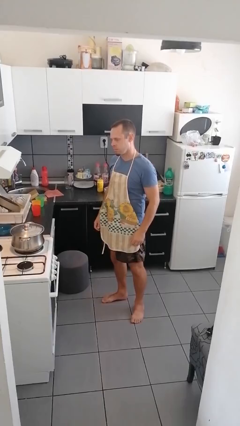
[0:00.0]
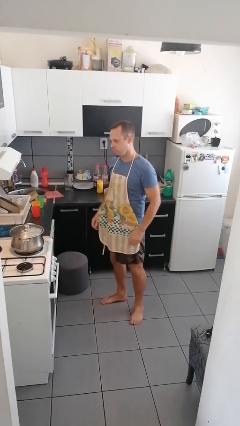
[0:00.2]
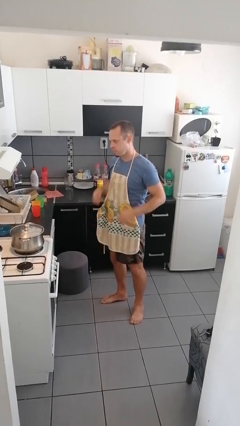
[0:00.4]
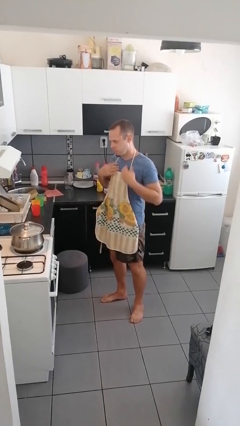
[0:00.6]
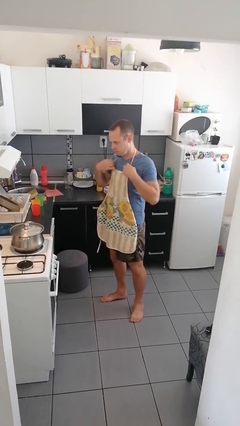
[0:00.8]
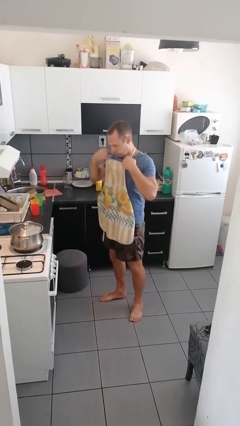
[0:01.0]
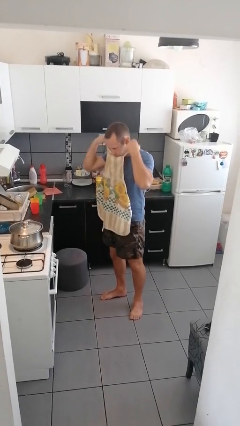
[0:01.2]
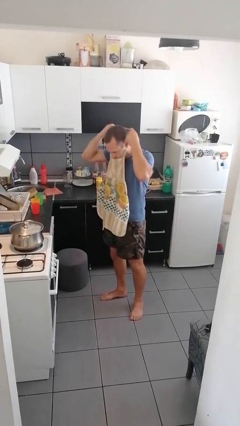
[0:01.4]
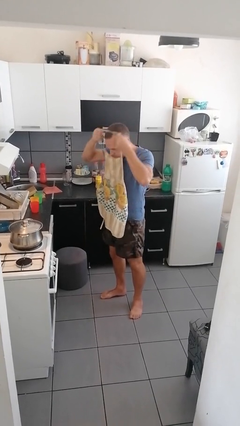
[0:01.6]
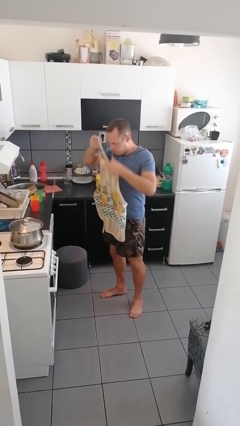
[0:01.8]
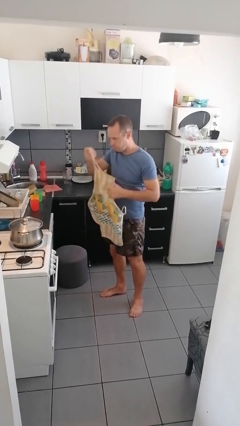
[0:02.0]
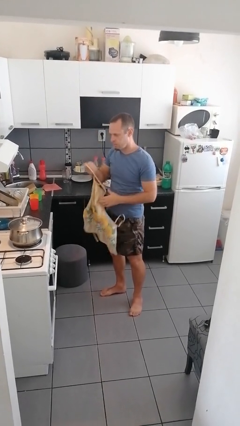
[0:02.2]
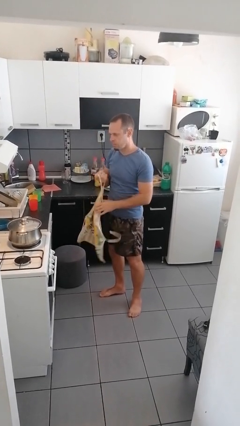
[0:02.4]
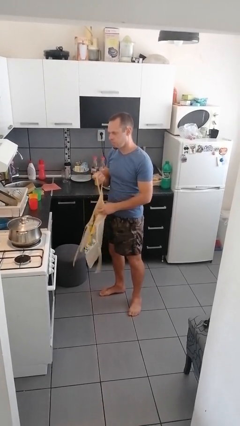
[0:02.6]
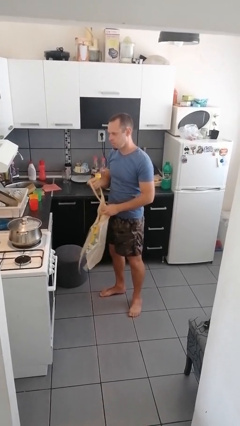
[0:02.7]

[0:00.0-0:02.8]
person takes off apron

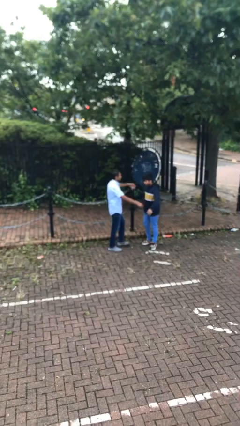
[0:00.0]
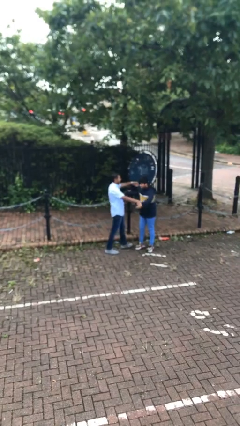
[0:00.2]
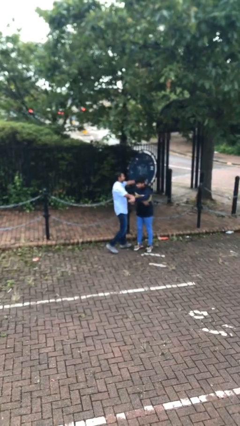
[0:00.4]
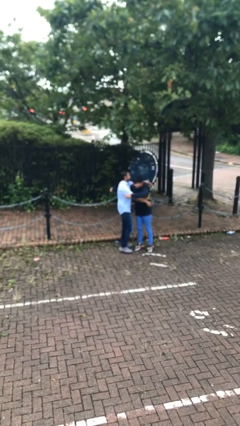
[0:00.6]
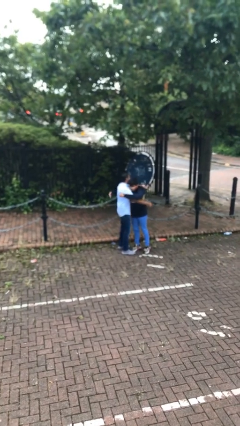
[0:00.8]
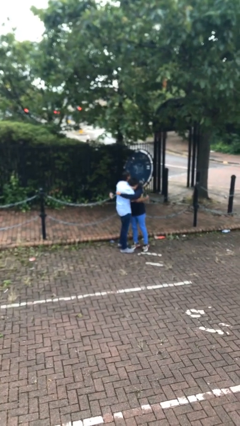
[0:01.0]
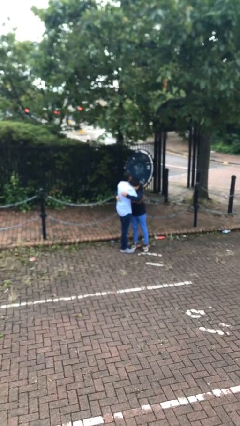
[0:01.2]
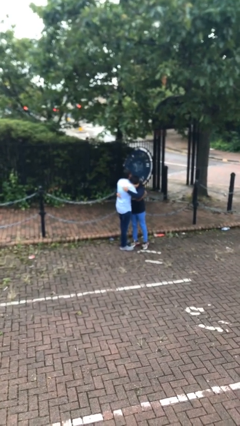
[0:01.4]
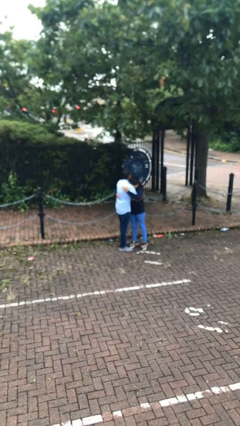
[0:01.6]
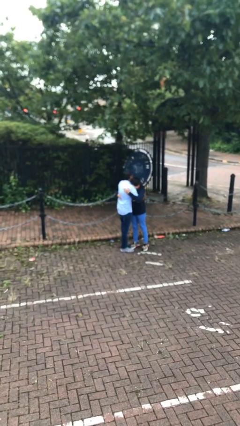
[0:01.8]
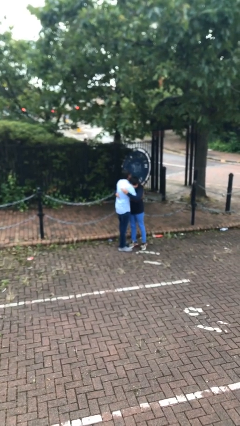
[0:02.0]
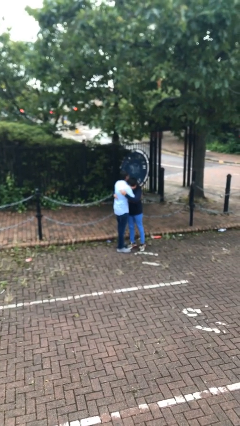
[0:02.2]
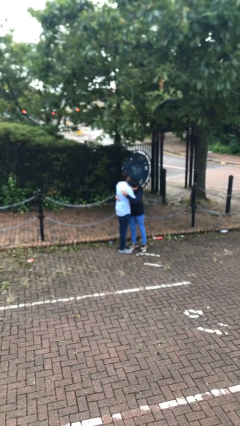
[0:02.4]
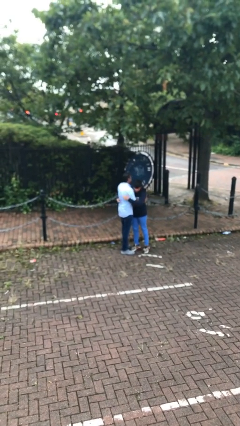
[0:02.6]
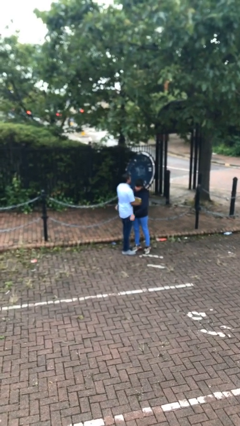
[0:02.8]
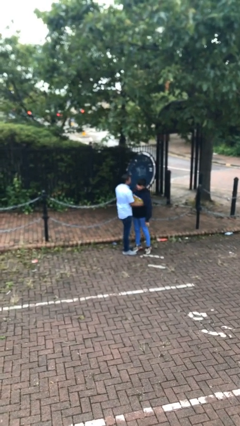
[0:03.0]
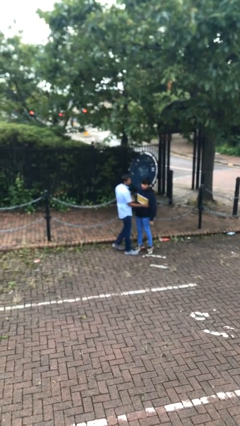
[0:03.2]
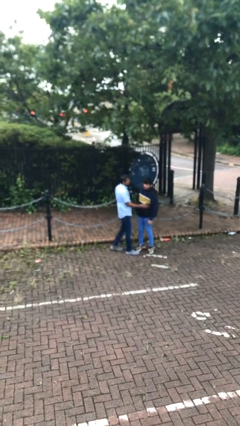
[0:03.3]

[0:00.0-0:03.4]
person embraces person

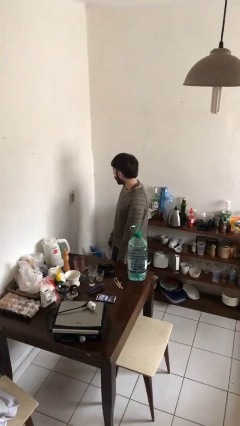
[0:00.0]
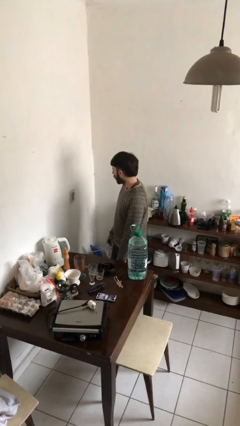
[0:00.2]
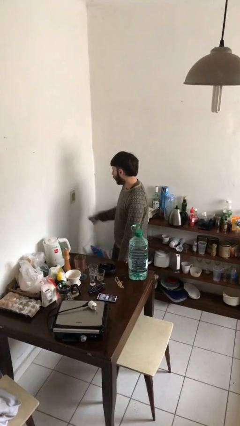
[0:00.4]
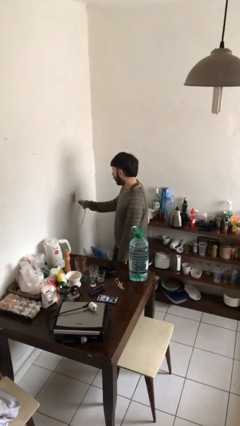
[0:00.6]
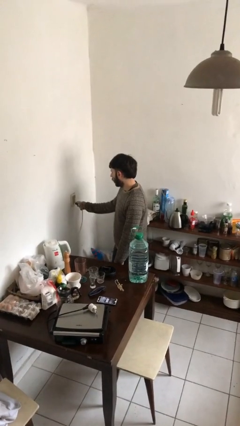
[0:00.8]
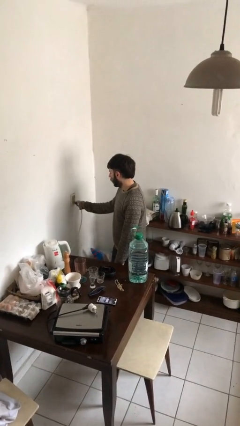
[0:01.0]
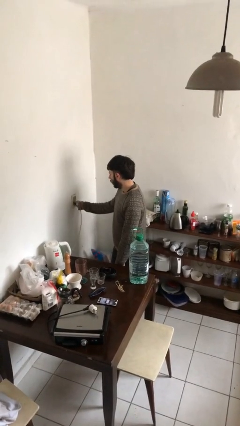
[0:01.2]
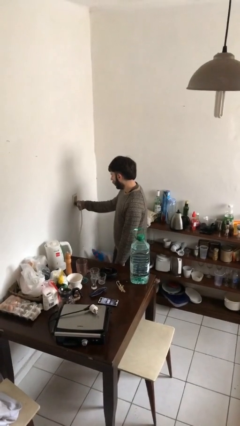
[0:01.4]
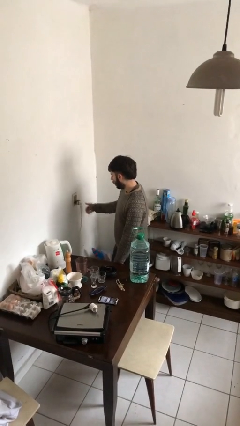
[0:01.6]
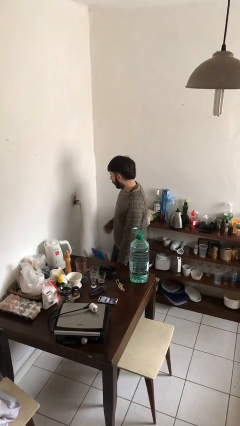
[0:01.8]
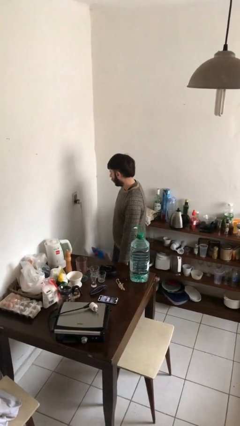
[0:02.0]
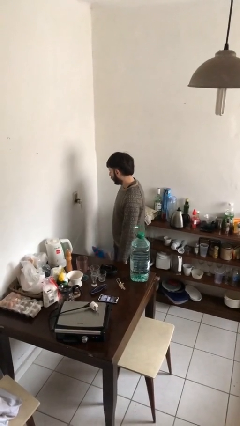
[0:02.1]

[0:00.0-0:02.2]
person plugs into electrical socket

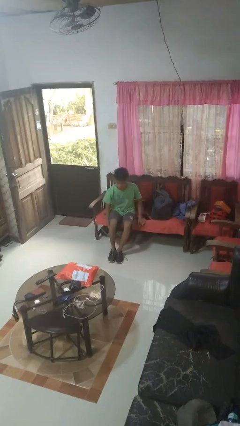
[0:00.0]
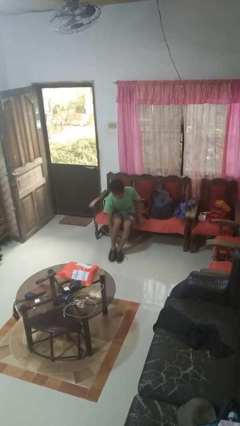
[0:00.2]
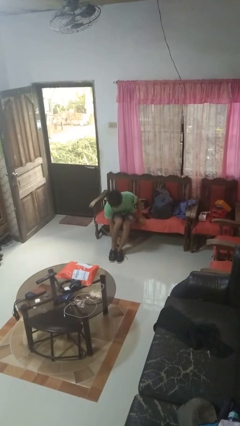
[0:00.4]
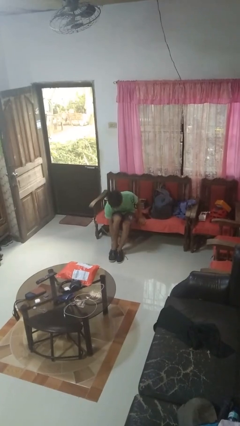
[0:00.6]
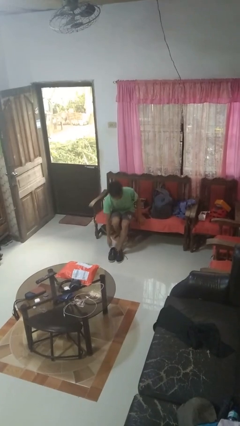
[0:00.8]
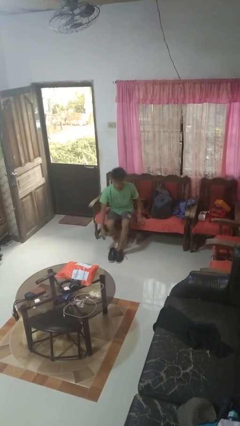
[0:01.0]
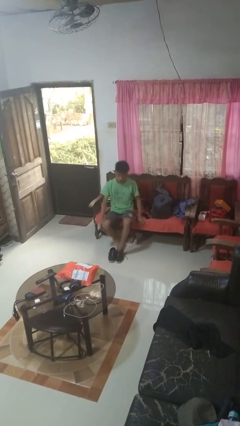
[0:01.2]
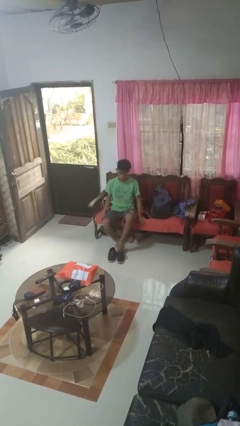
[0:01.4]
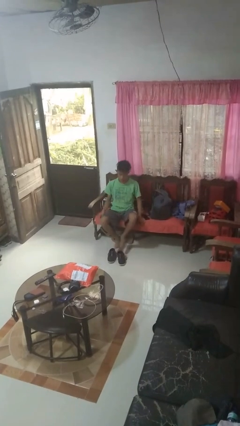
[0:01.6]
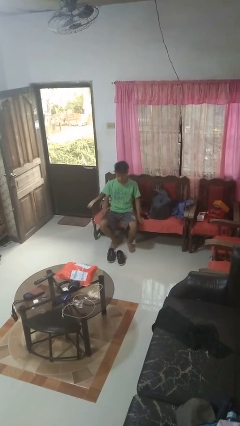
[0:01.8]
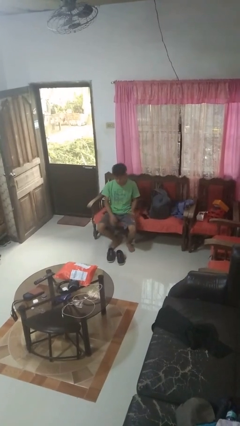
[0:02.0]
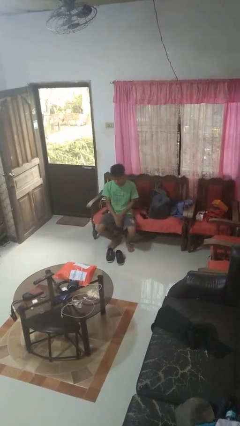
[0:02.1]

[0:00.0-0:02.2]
person takes off shoes

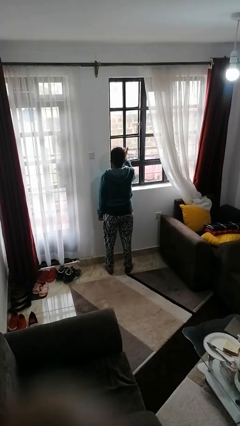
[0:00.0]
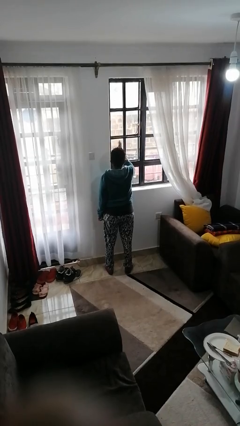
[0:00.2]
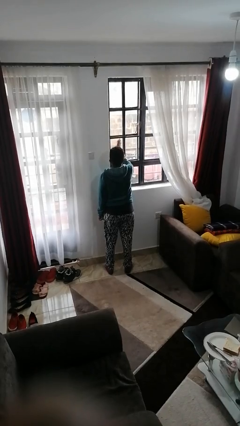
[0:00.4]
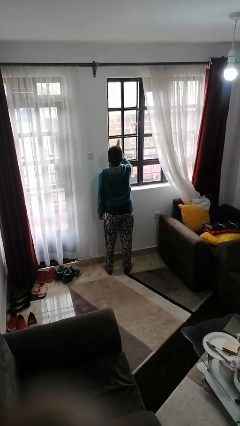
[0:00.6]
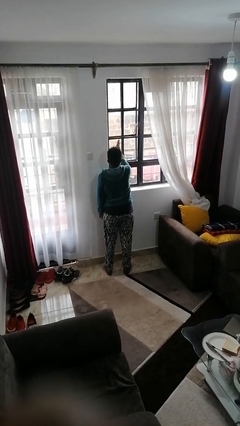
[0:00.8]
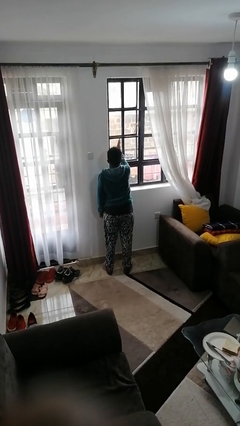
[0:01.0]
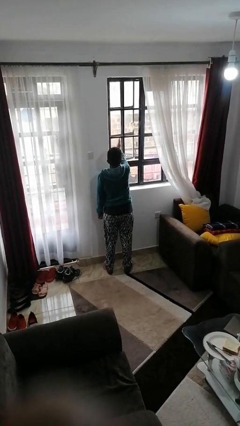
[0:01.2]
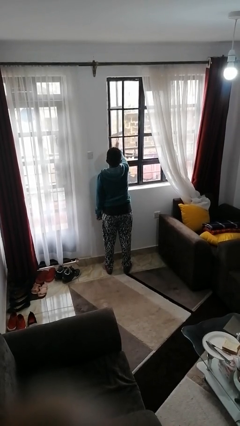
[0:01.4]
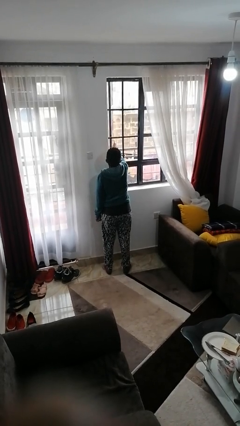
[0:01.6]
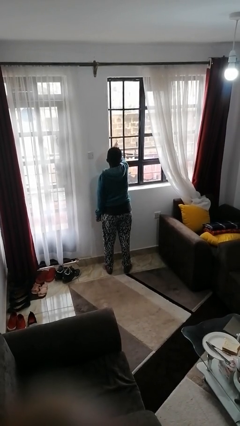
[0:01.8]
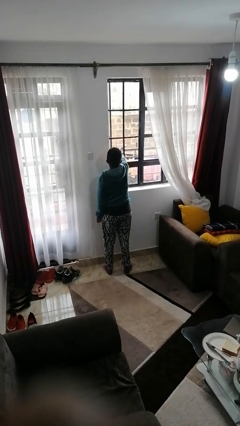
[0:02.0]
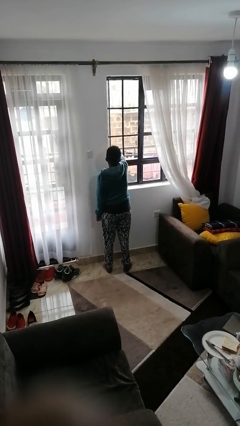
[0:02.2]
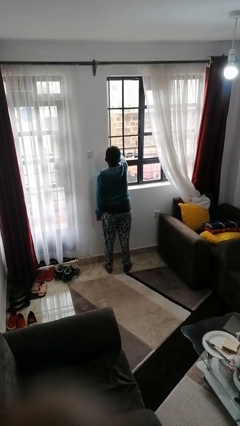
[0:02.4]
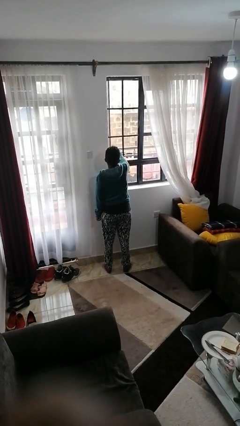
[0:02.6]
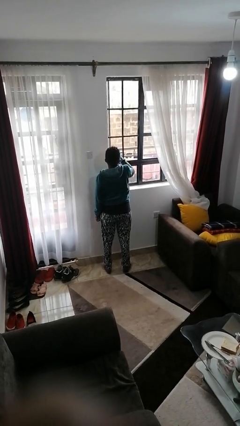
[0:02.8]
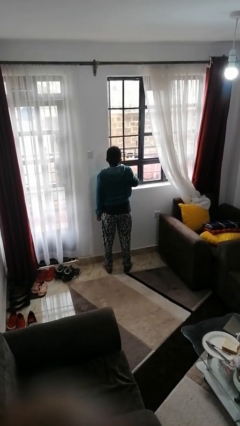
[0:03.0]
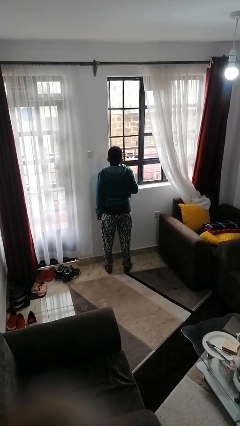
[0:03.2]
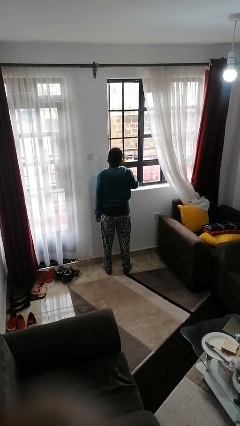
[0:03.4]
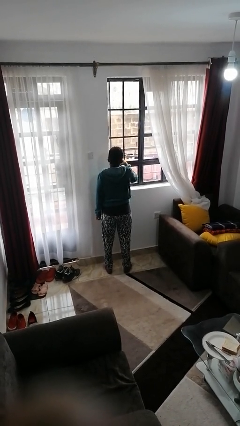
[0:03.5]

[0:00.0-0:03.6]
person opens home window

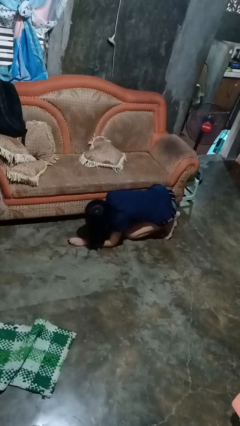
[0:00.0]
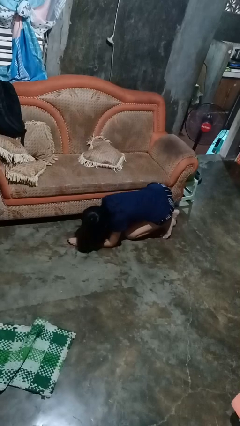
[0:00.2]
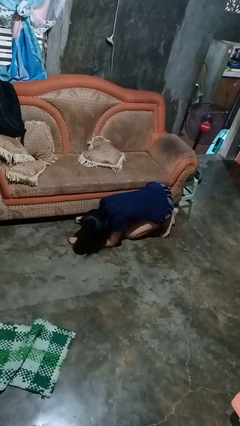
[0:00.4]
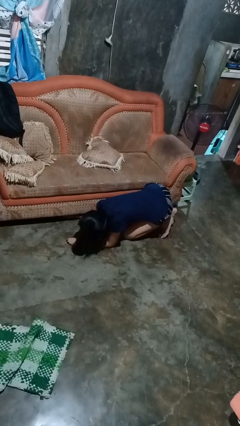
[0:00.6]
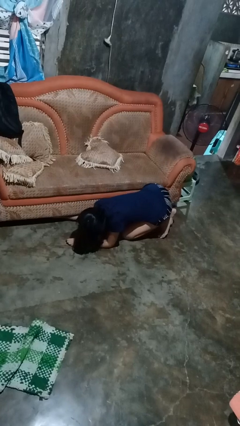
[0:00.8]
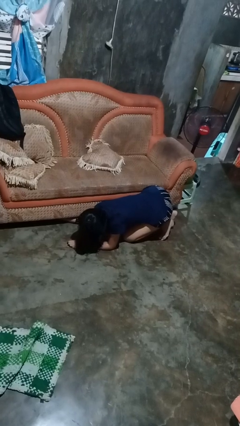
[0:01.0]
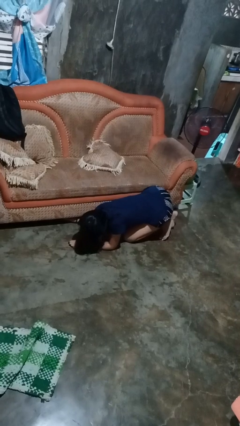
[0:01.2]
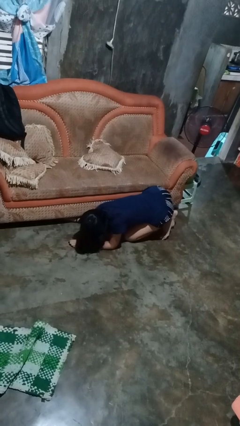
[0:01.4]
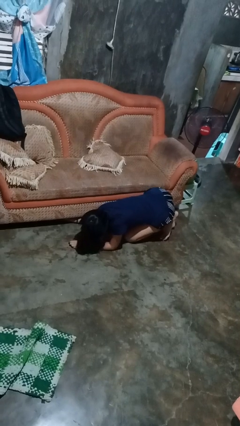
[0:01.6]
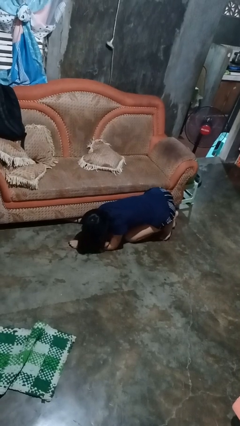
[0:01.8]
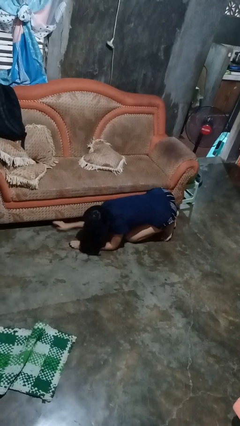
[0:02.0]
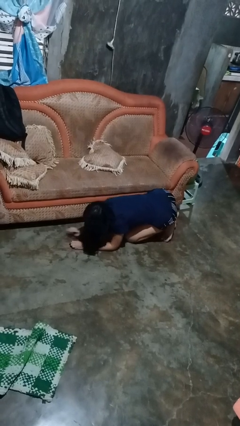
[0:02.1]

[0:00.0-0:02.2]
person searches under couch

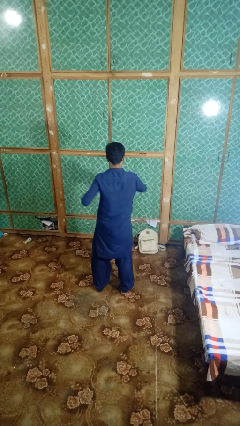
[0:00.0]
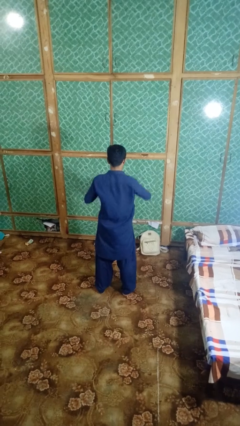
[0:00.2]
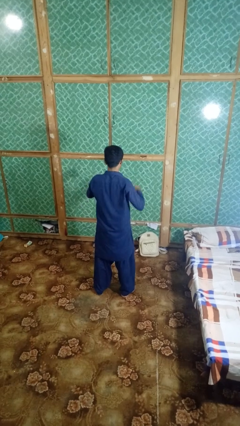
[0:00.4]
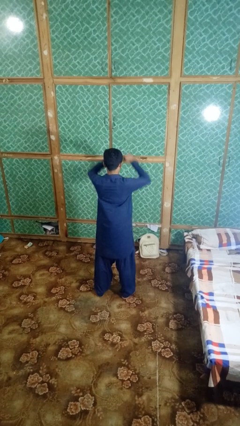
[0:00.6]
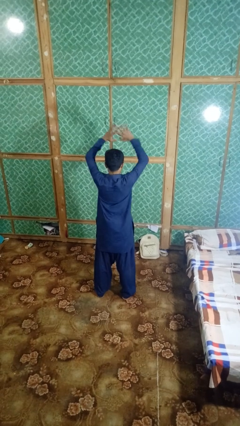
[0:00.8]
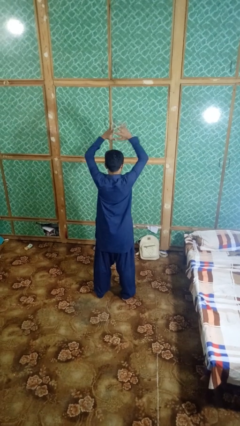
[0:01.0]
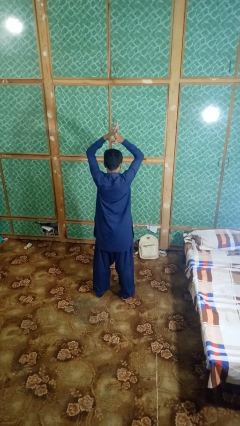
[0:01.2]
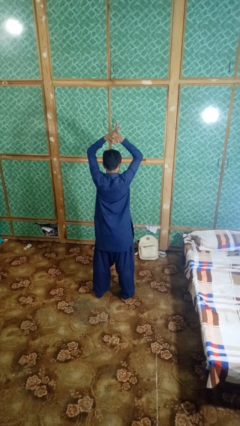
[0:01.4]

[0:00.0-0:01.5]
person stretches arms over head
